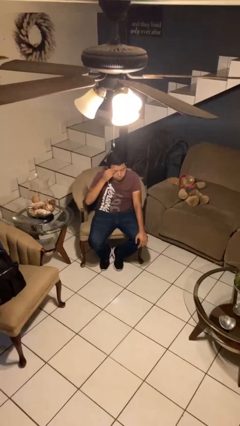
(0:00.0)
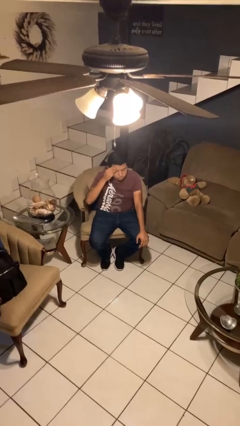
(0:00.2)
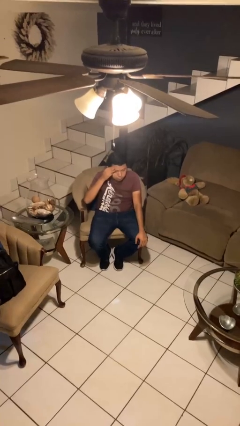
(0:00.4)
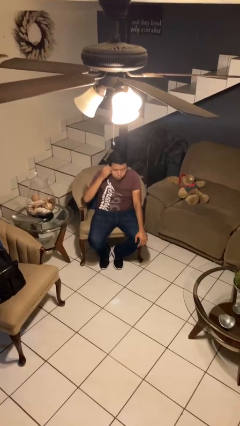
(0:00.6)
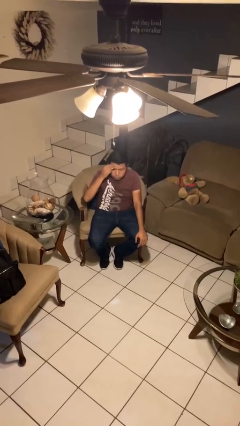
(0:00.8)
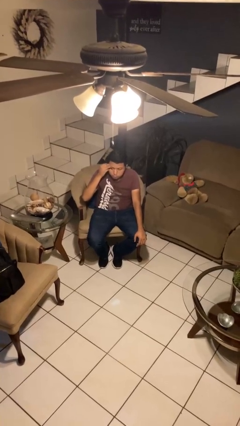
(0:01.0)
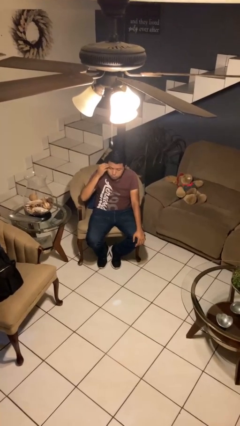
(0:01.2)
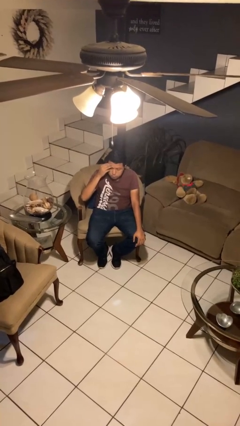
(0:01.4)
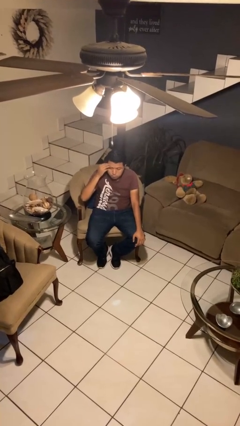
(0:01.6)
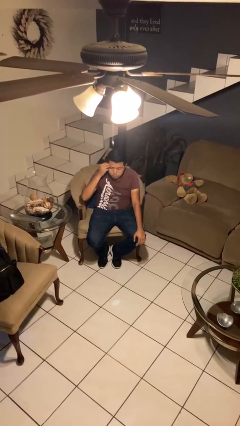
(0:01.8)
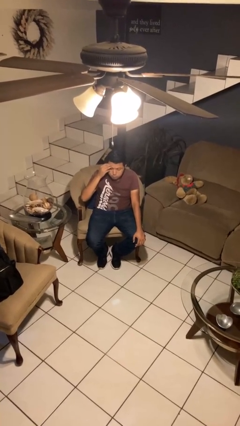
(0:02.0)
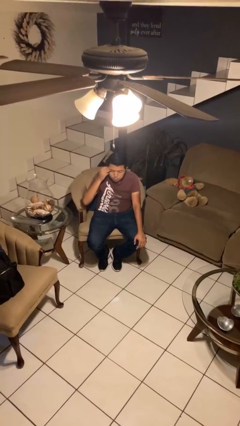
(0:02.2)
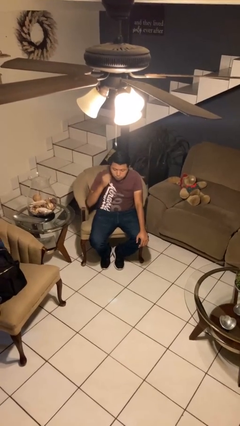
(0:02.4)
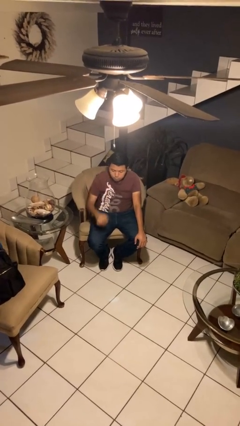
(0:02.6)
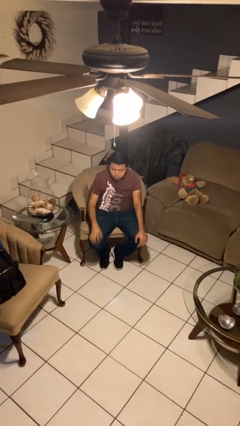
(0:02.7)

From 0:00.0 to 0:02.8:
person scratches face

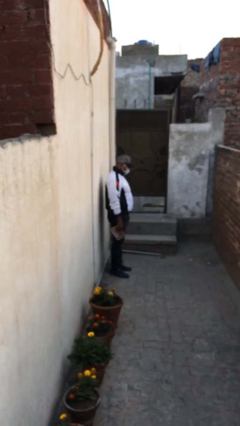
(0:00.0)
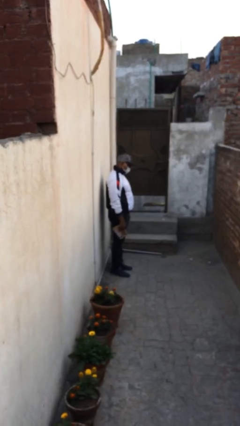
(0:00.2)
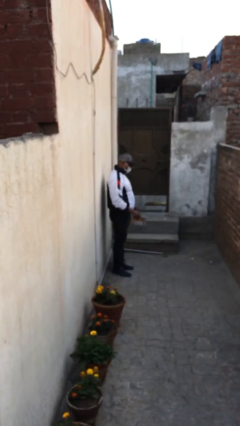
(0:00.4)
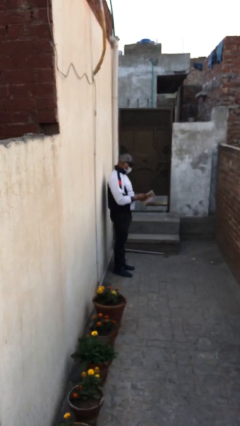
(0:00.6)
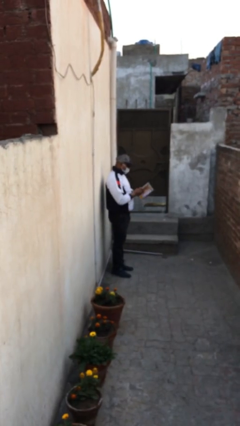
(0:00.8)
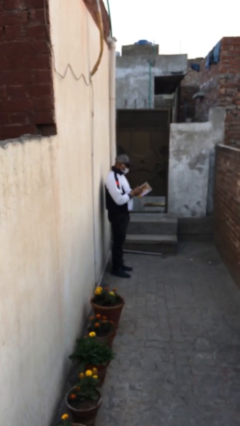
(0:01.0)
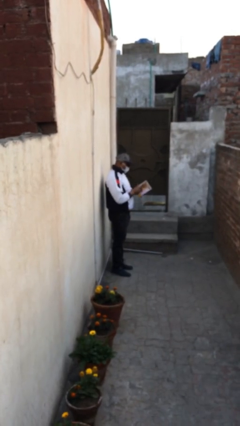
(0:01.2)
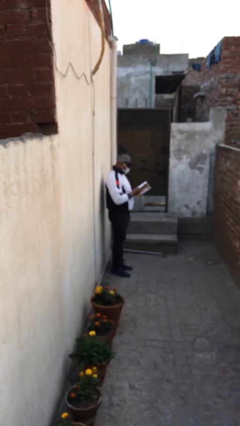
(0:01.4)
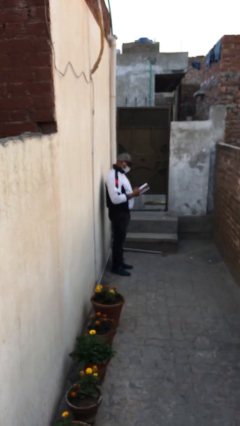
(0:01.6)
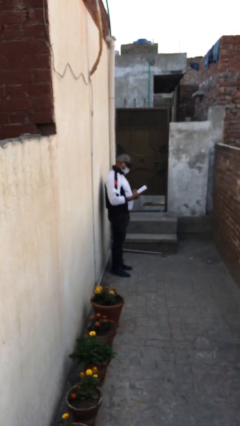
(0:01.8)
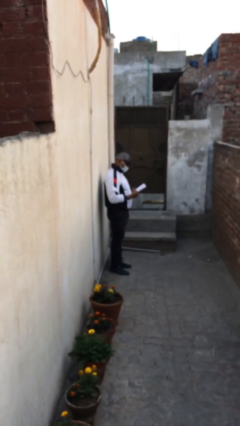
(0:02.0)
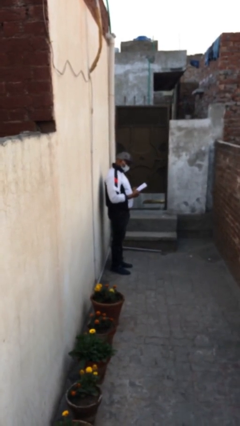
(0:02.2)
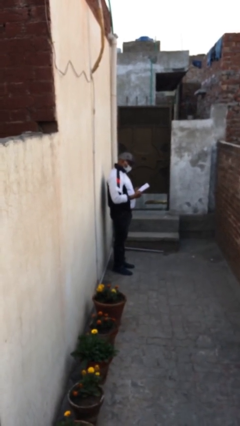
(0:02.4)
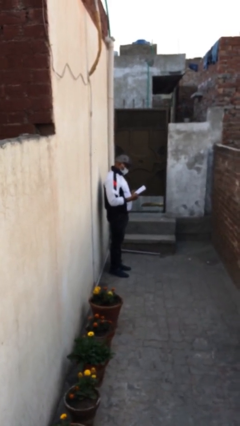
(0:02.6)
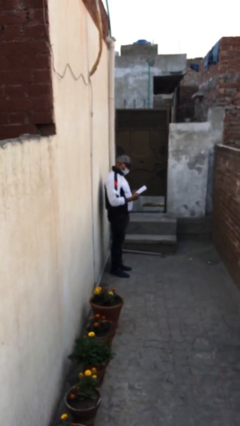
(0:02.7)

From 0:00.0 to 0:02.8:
person reads document

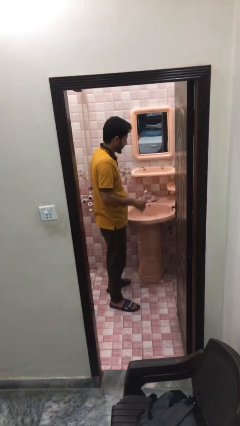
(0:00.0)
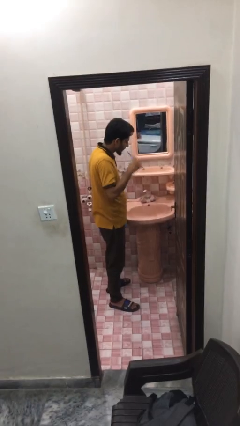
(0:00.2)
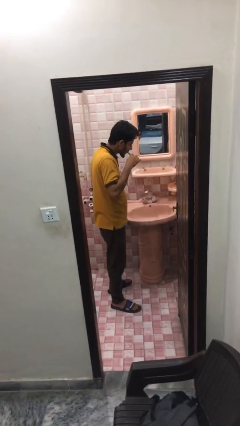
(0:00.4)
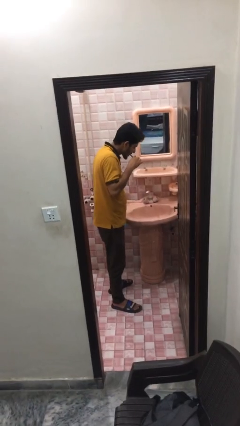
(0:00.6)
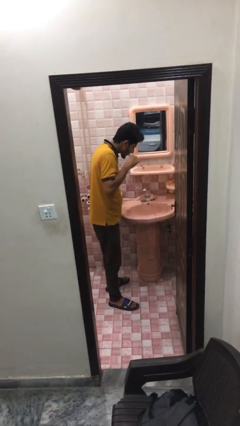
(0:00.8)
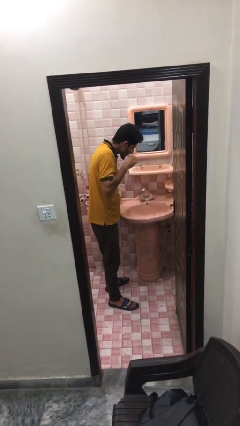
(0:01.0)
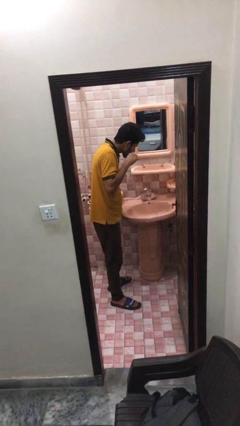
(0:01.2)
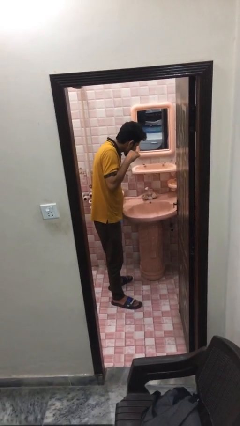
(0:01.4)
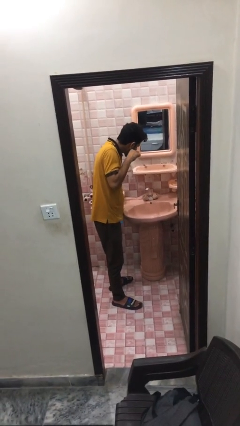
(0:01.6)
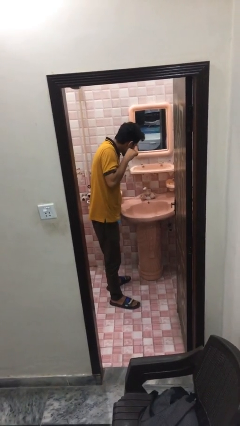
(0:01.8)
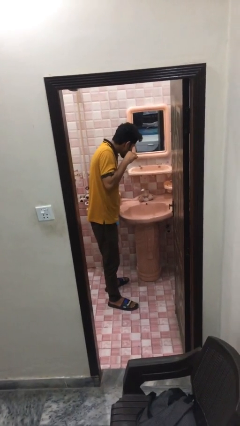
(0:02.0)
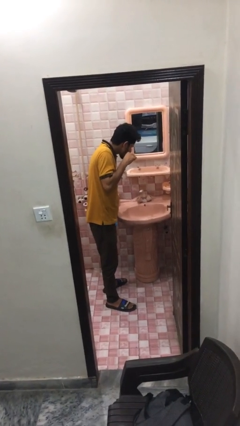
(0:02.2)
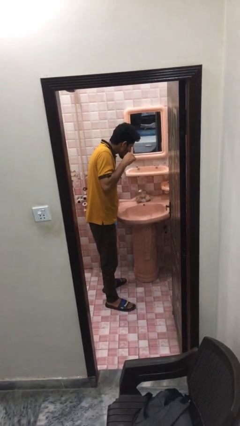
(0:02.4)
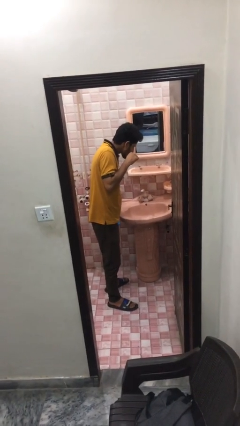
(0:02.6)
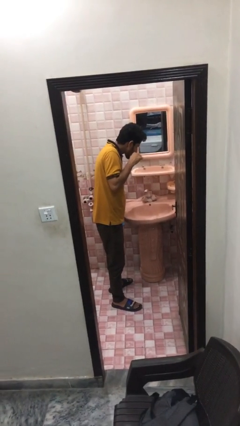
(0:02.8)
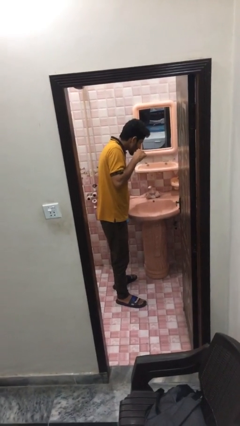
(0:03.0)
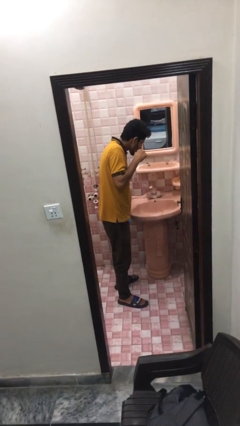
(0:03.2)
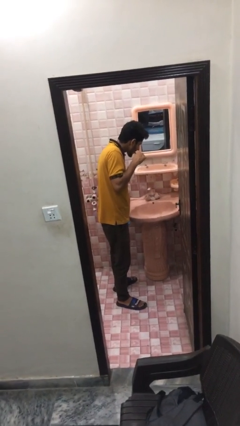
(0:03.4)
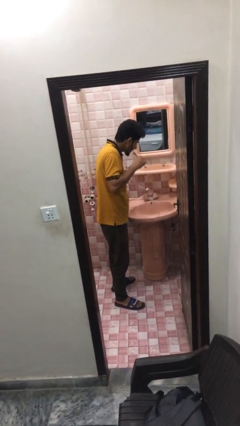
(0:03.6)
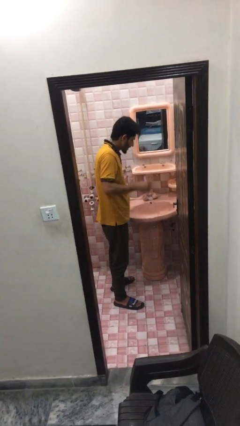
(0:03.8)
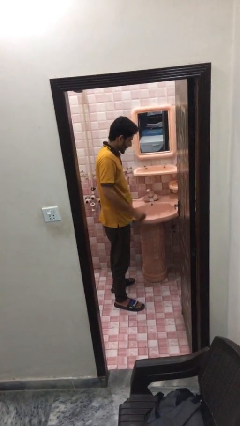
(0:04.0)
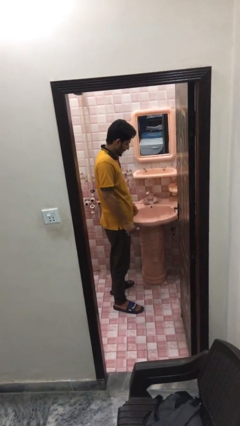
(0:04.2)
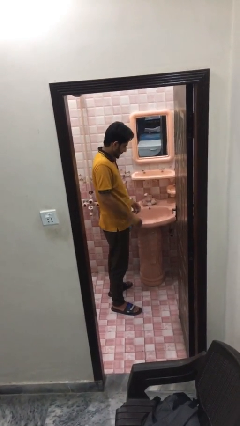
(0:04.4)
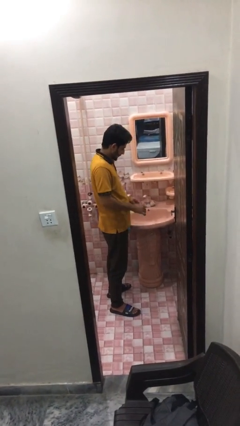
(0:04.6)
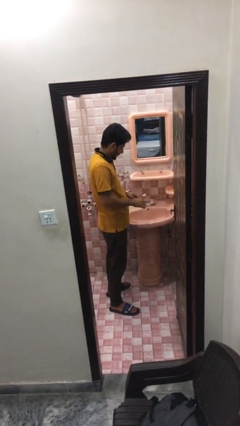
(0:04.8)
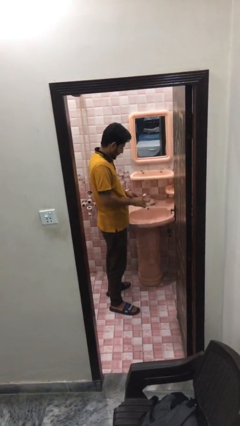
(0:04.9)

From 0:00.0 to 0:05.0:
person brushes teeth

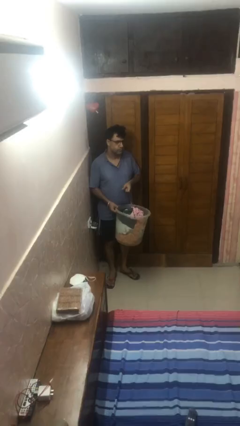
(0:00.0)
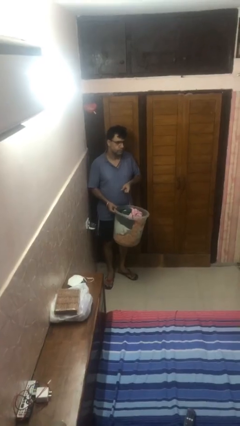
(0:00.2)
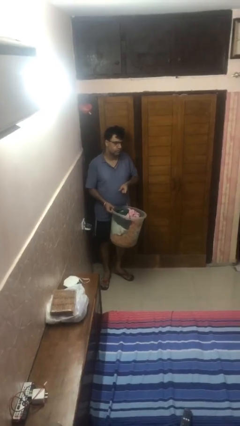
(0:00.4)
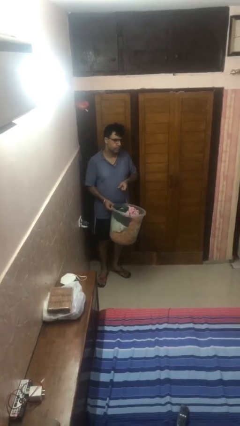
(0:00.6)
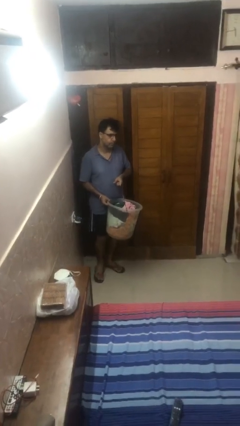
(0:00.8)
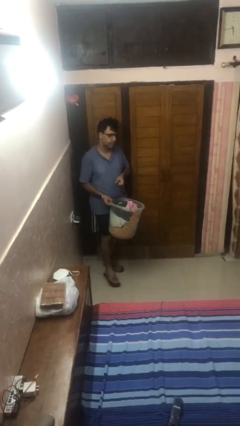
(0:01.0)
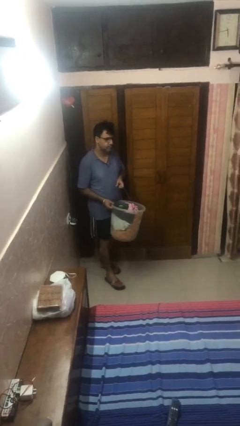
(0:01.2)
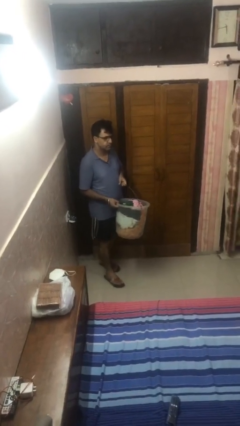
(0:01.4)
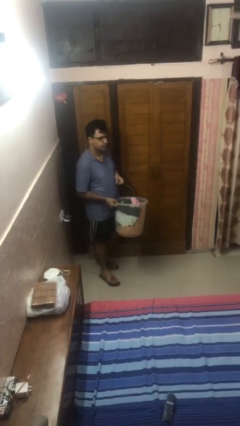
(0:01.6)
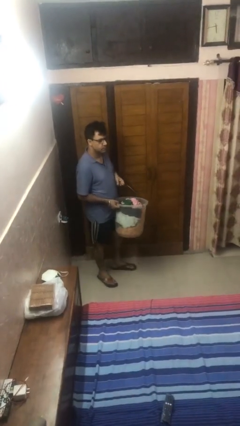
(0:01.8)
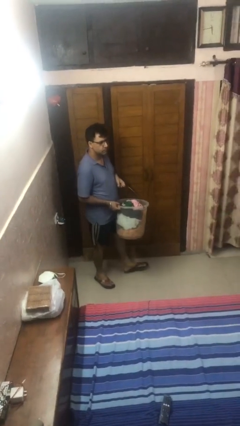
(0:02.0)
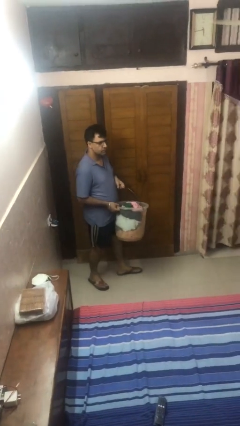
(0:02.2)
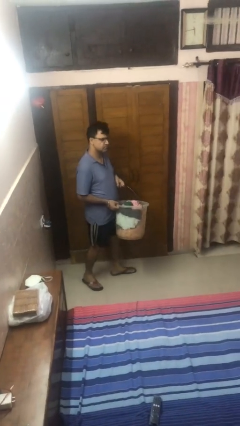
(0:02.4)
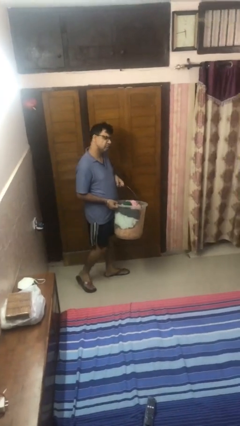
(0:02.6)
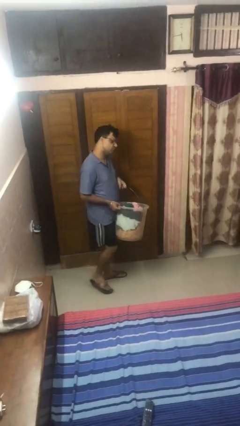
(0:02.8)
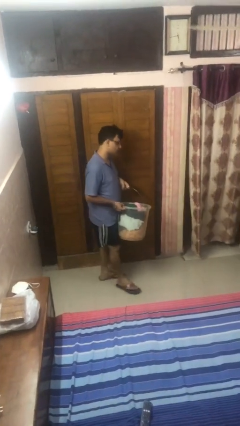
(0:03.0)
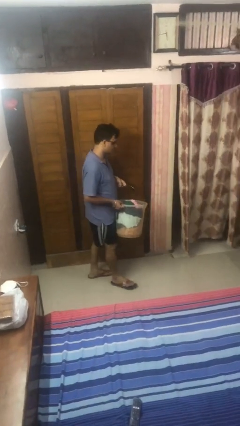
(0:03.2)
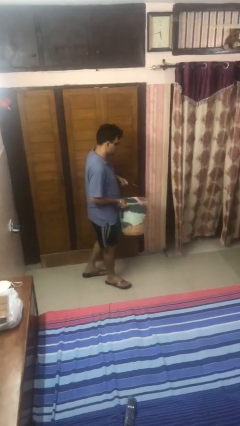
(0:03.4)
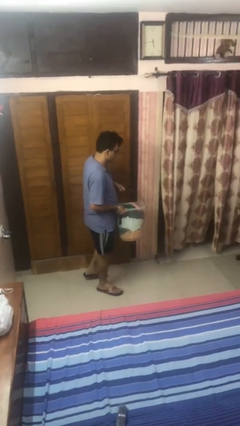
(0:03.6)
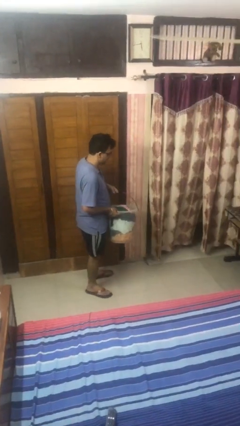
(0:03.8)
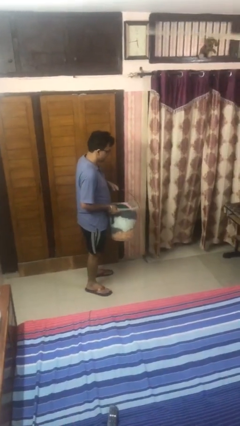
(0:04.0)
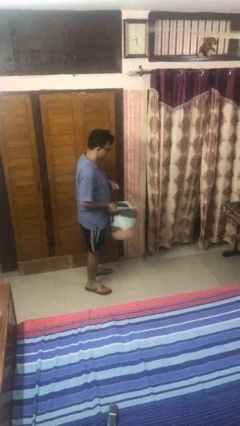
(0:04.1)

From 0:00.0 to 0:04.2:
person carries laundry basket

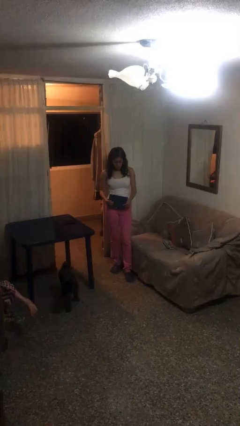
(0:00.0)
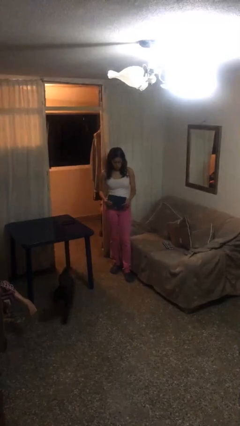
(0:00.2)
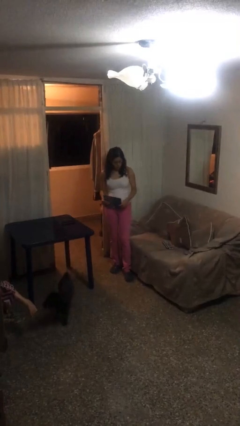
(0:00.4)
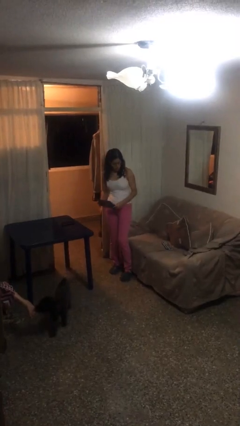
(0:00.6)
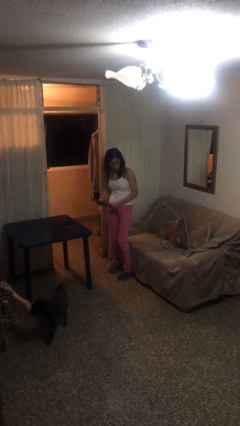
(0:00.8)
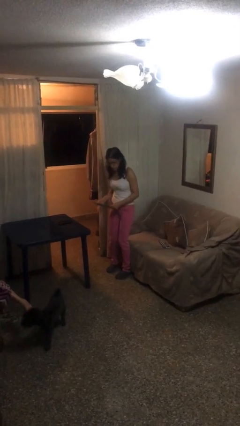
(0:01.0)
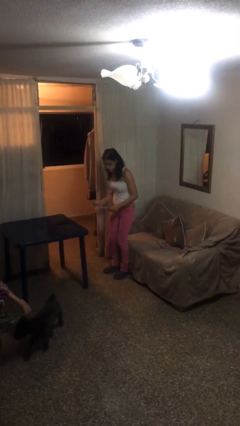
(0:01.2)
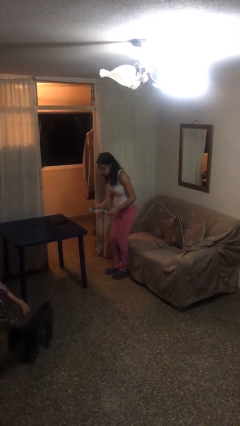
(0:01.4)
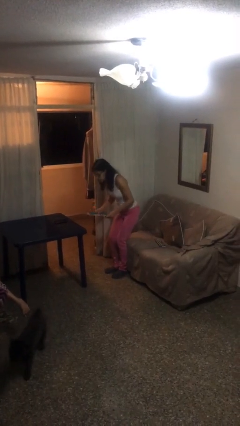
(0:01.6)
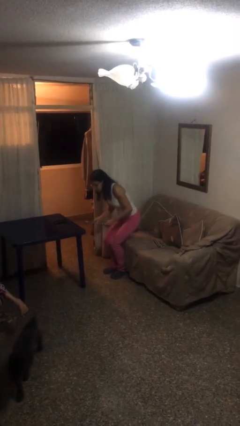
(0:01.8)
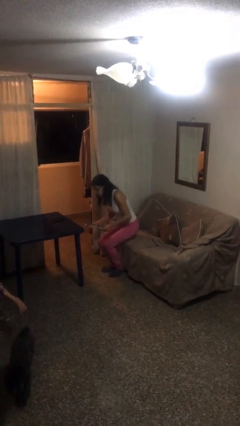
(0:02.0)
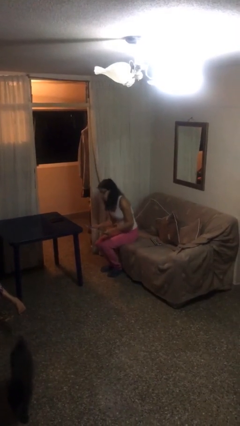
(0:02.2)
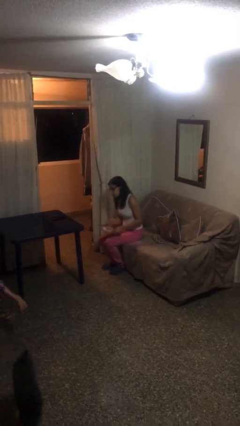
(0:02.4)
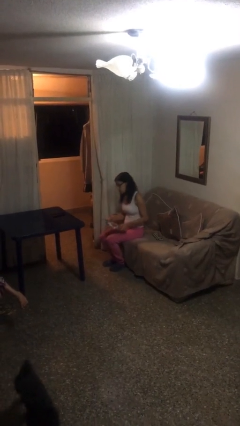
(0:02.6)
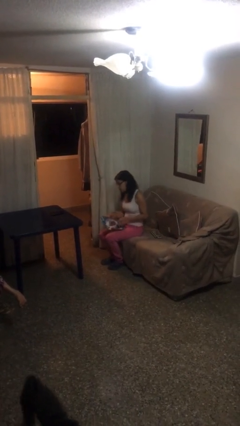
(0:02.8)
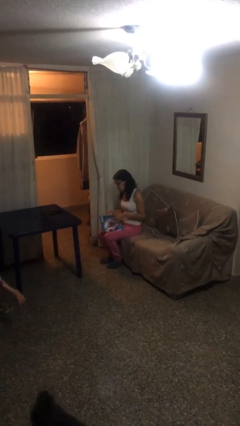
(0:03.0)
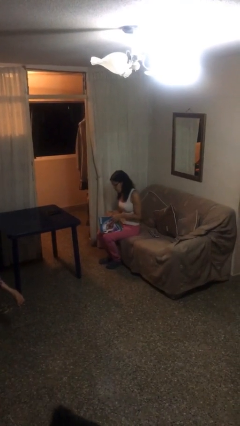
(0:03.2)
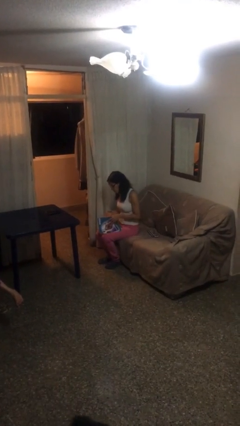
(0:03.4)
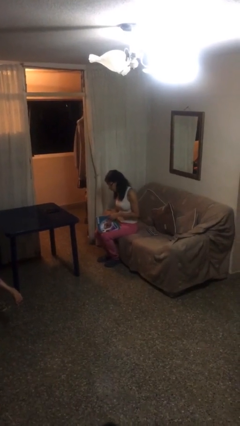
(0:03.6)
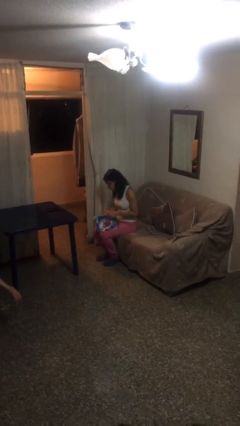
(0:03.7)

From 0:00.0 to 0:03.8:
person sits down
